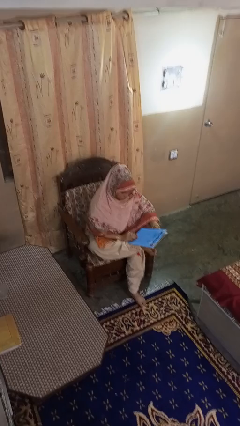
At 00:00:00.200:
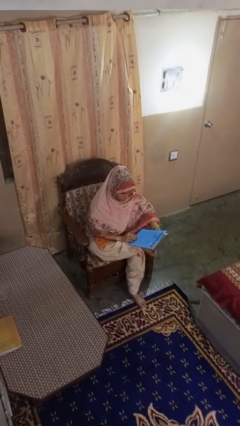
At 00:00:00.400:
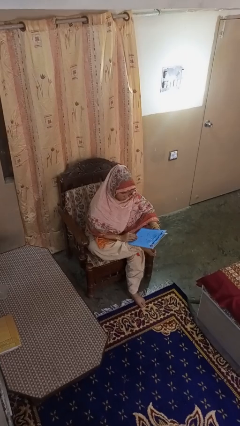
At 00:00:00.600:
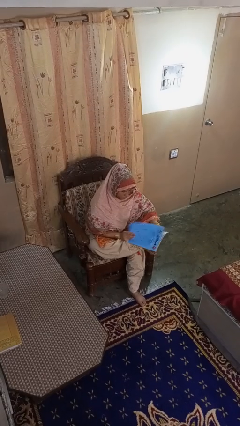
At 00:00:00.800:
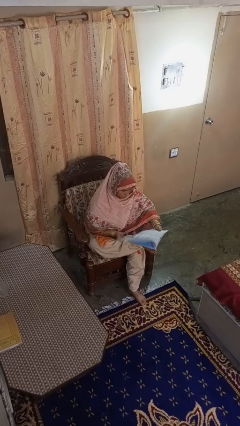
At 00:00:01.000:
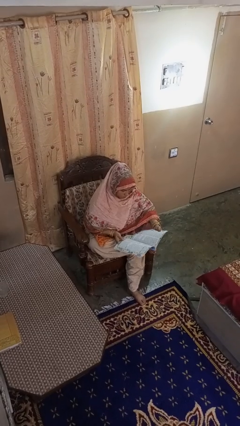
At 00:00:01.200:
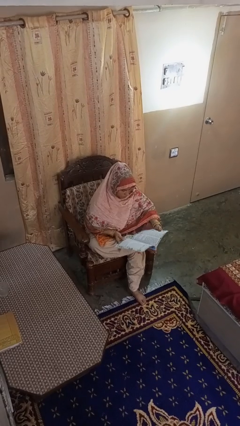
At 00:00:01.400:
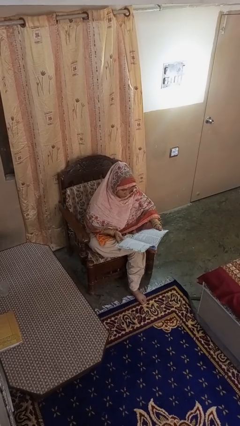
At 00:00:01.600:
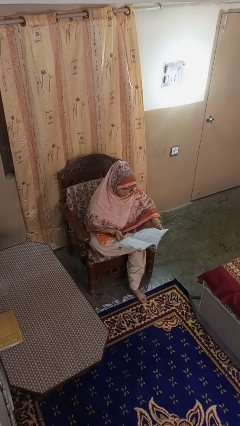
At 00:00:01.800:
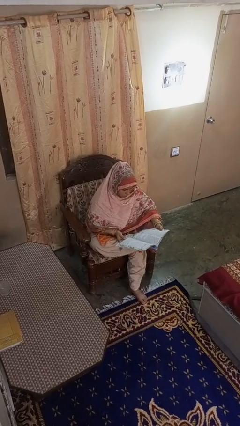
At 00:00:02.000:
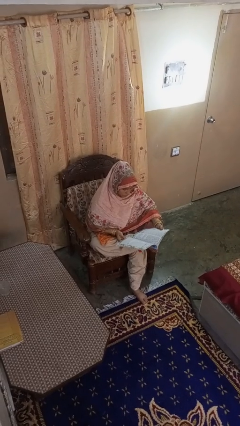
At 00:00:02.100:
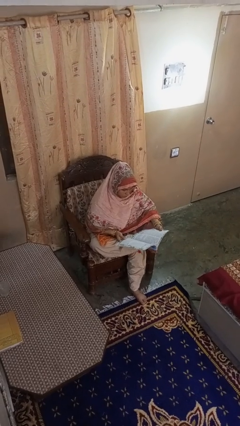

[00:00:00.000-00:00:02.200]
person reads magazine

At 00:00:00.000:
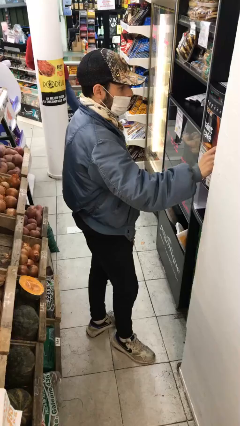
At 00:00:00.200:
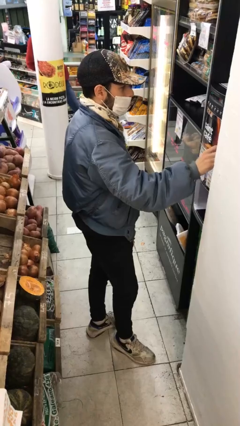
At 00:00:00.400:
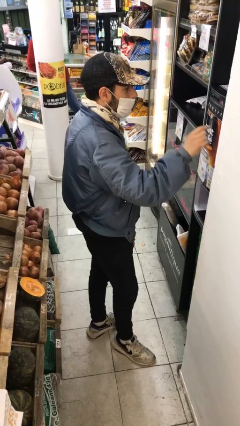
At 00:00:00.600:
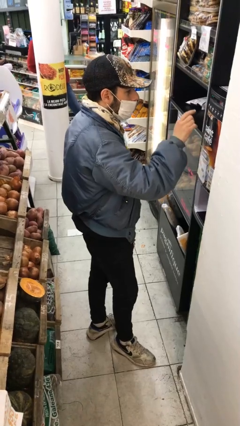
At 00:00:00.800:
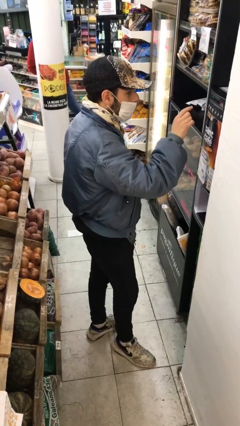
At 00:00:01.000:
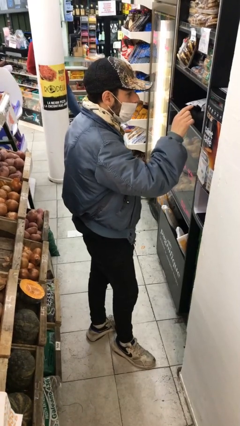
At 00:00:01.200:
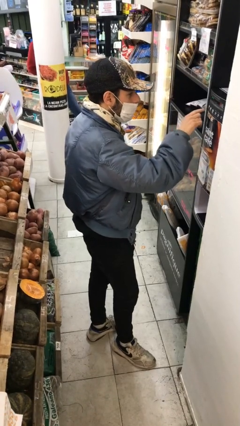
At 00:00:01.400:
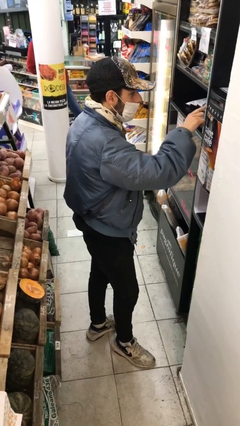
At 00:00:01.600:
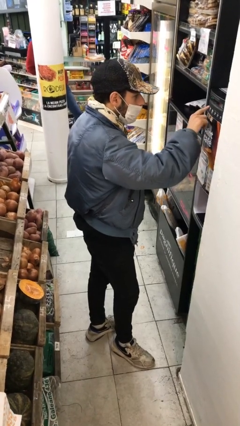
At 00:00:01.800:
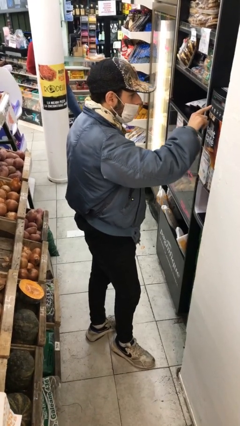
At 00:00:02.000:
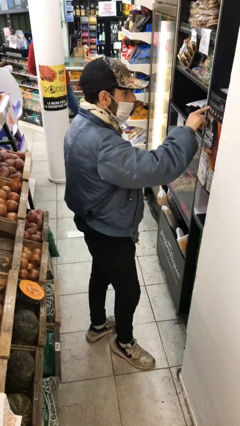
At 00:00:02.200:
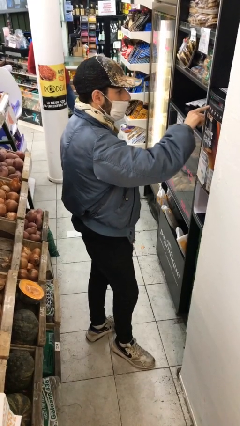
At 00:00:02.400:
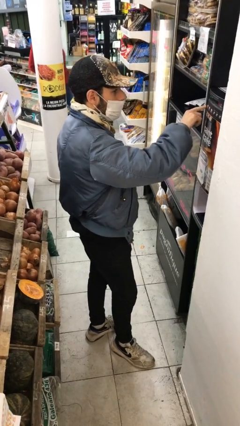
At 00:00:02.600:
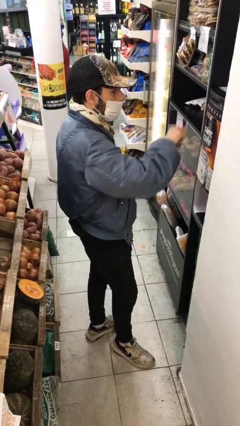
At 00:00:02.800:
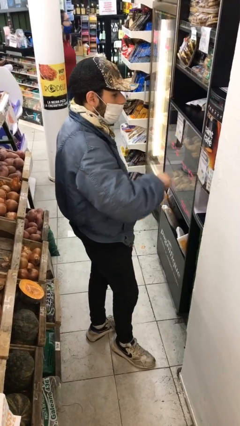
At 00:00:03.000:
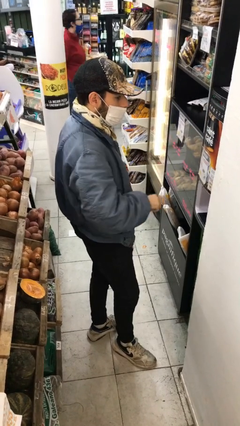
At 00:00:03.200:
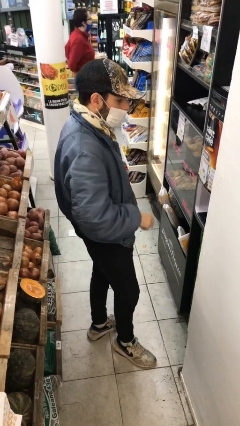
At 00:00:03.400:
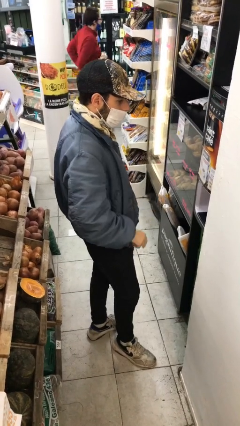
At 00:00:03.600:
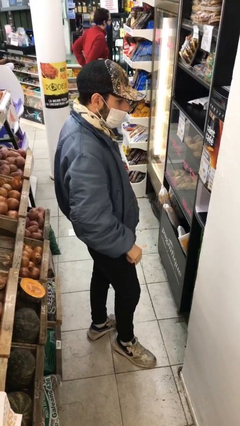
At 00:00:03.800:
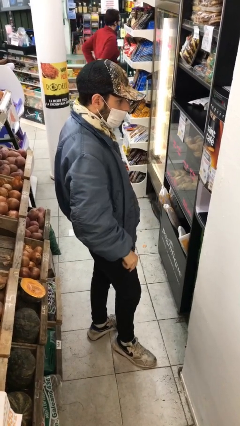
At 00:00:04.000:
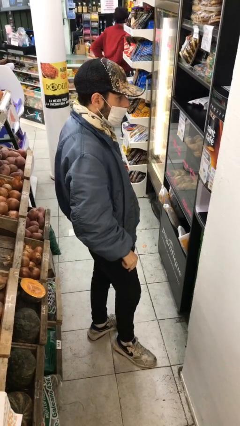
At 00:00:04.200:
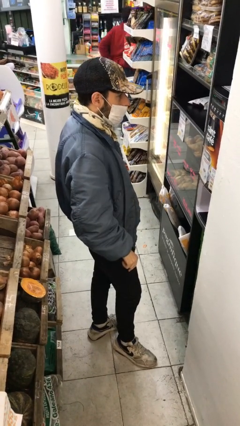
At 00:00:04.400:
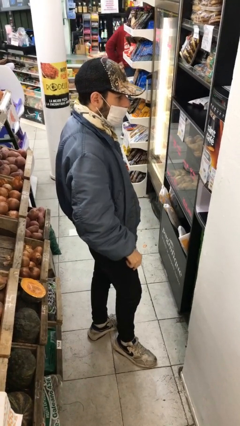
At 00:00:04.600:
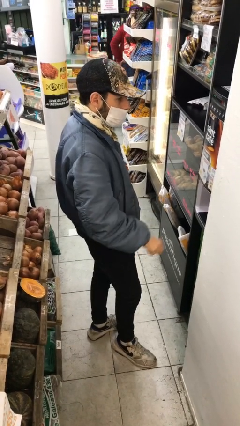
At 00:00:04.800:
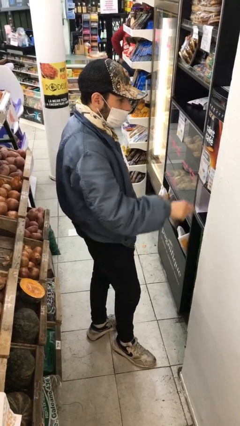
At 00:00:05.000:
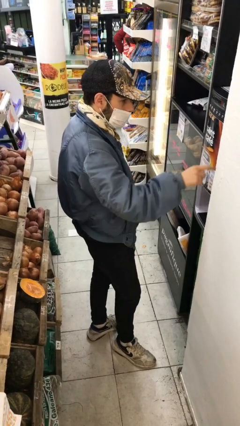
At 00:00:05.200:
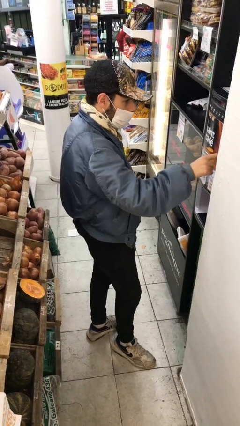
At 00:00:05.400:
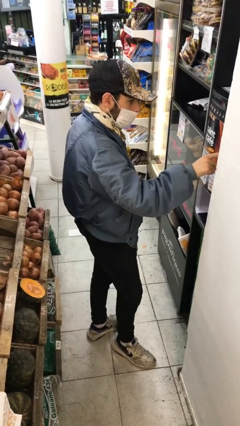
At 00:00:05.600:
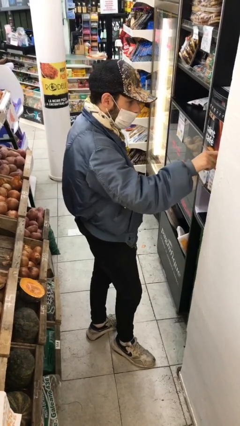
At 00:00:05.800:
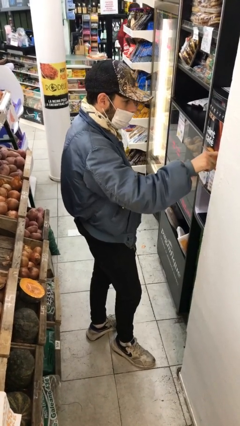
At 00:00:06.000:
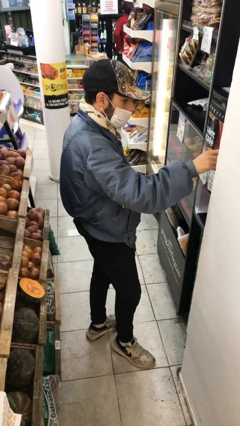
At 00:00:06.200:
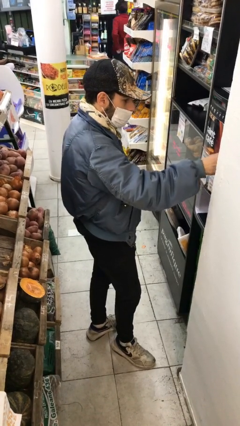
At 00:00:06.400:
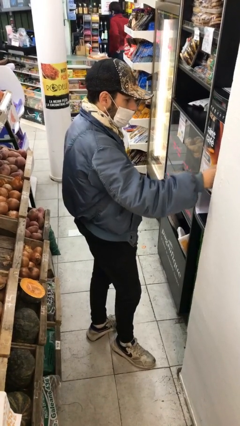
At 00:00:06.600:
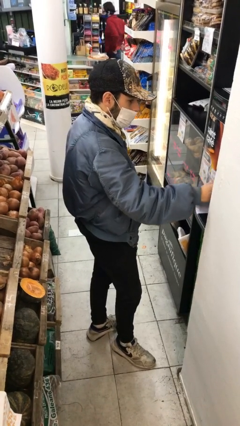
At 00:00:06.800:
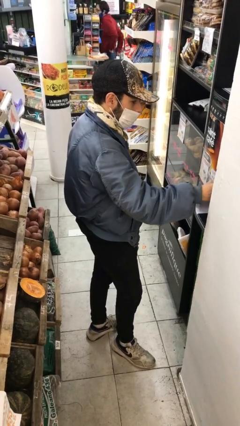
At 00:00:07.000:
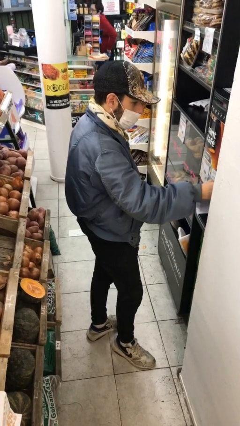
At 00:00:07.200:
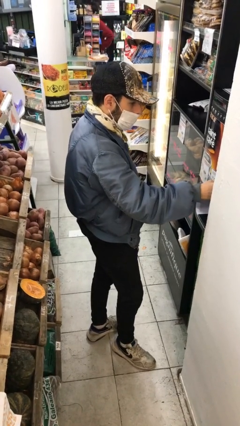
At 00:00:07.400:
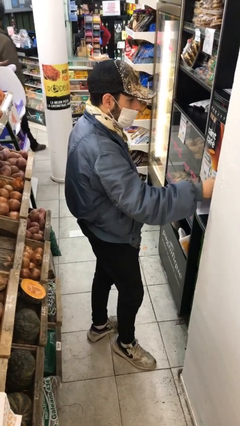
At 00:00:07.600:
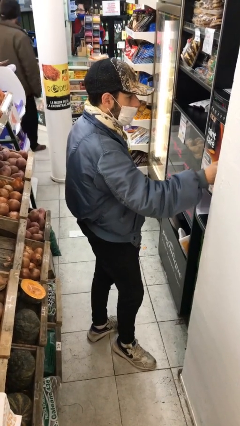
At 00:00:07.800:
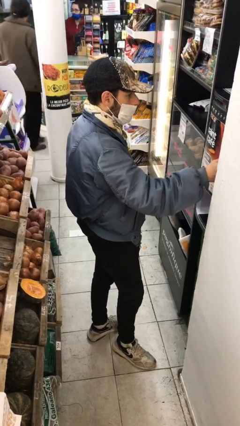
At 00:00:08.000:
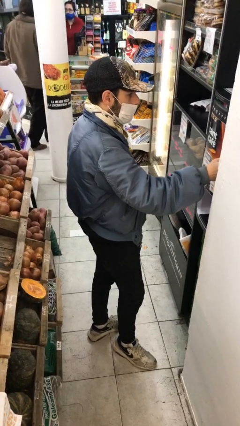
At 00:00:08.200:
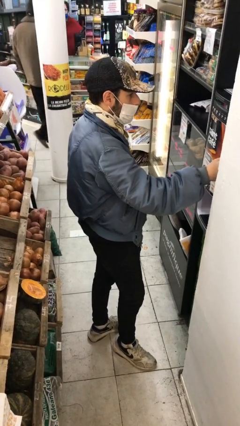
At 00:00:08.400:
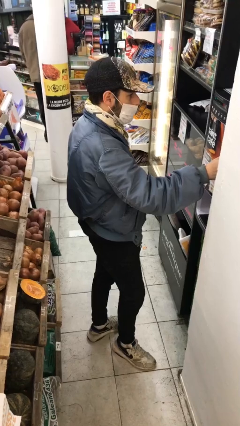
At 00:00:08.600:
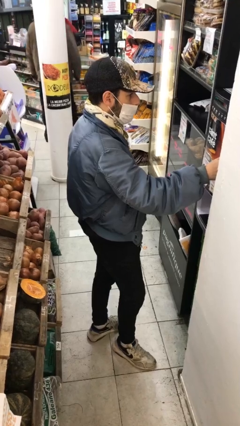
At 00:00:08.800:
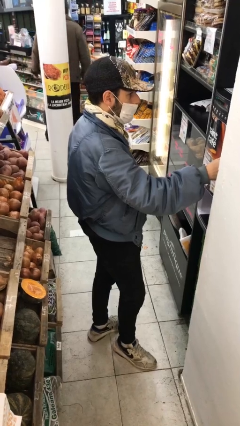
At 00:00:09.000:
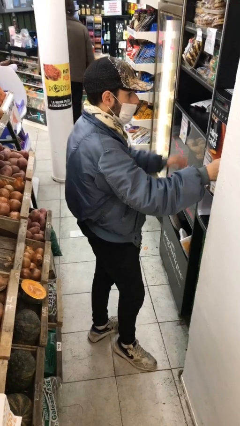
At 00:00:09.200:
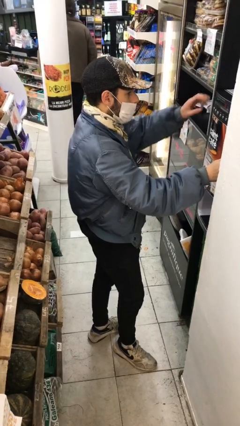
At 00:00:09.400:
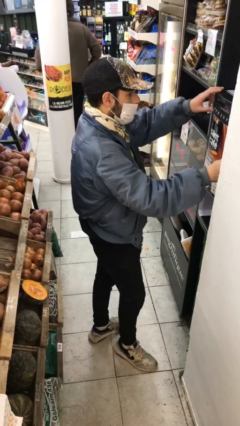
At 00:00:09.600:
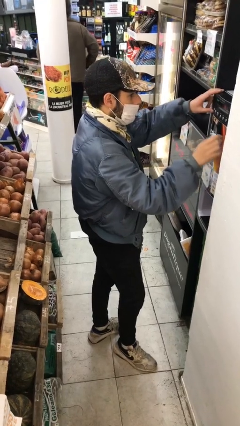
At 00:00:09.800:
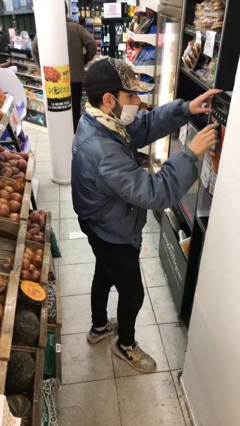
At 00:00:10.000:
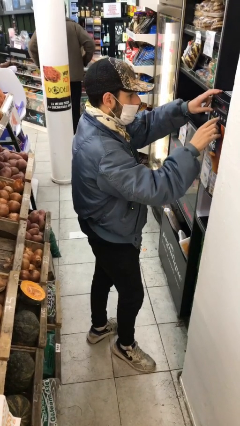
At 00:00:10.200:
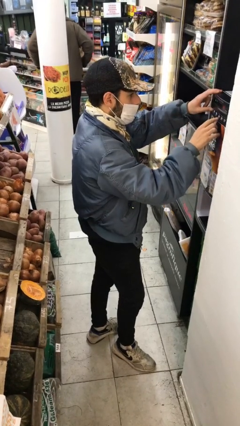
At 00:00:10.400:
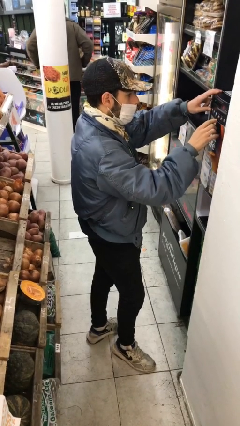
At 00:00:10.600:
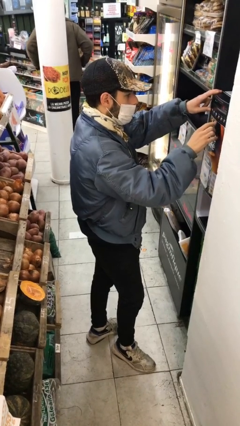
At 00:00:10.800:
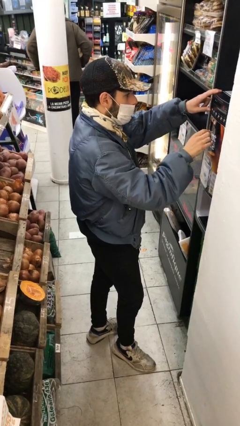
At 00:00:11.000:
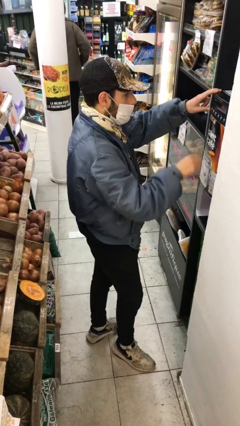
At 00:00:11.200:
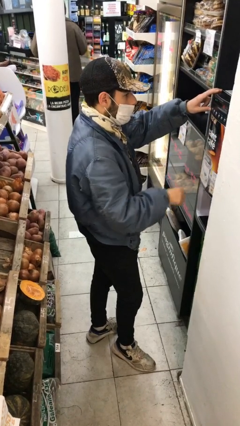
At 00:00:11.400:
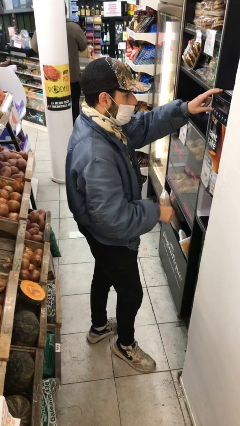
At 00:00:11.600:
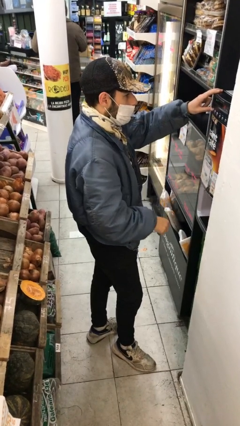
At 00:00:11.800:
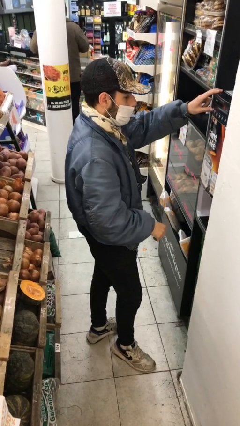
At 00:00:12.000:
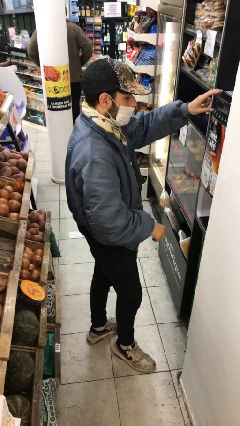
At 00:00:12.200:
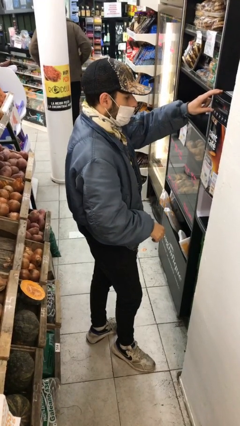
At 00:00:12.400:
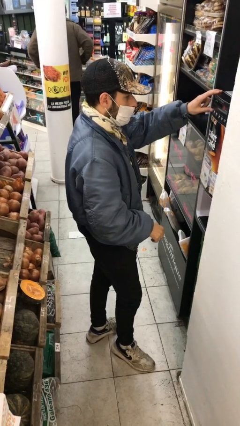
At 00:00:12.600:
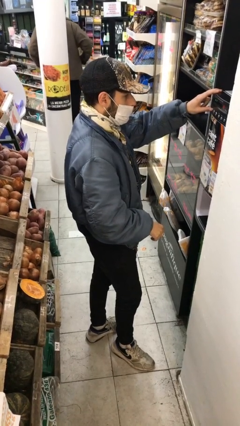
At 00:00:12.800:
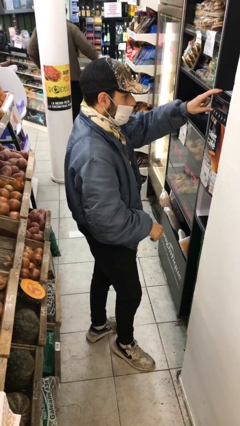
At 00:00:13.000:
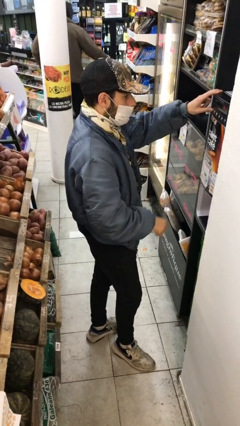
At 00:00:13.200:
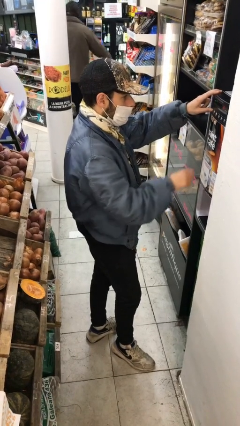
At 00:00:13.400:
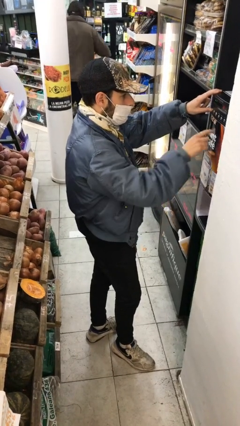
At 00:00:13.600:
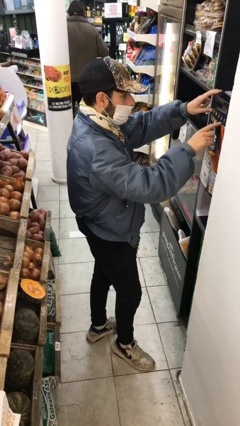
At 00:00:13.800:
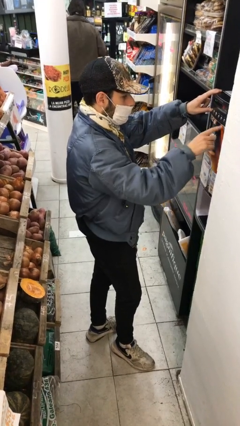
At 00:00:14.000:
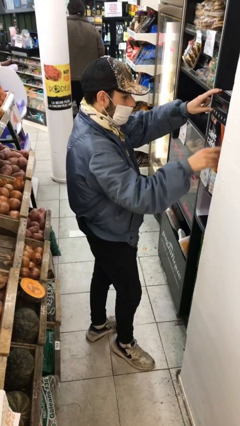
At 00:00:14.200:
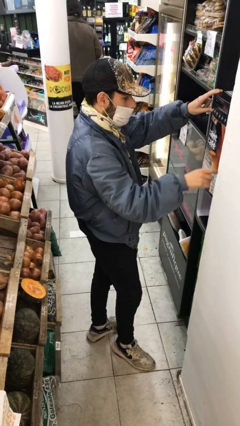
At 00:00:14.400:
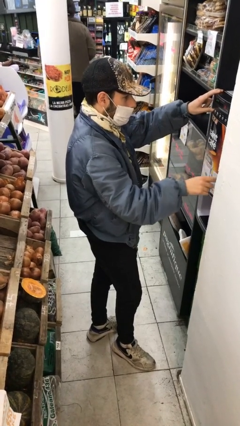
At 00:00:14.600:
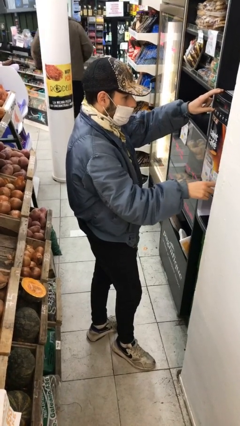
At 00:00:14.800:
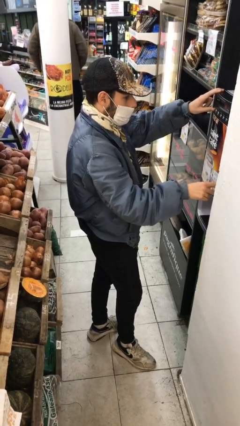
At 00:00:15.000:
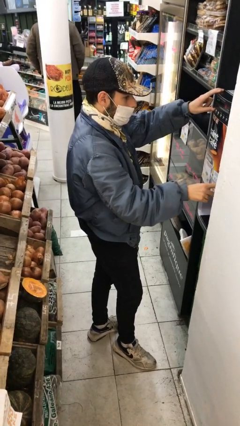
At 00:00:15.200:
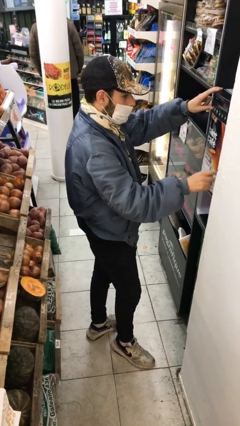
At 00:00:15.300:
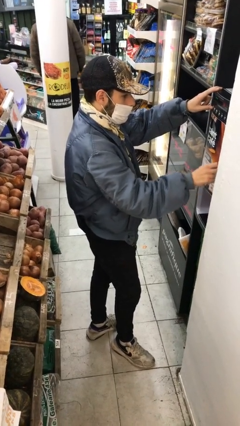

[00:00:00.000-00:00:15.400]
person purchases from machine

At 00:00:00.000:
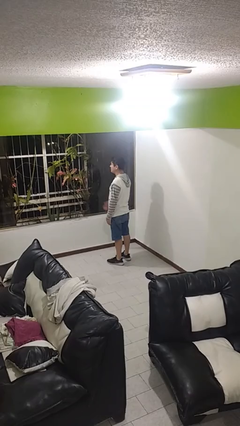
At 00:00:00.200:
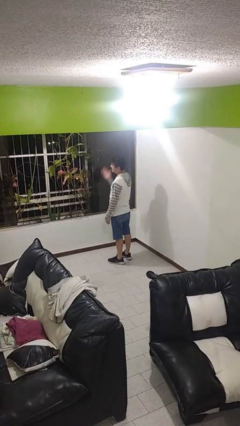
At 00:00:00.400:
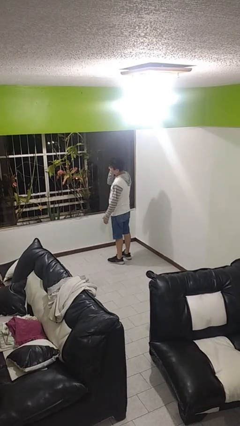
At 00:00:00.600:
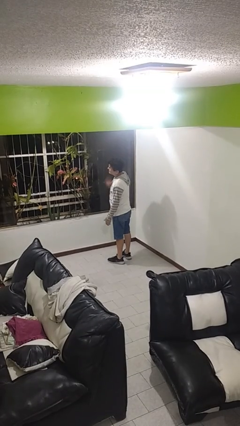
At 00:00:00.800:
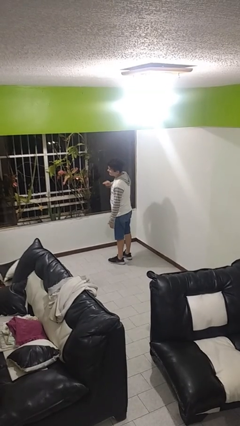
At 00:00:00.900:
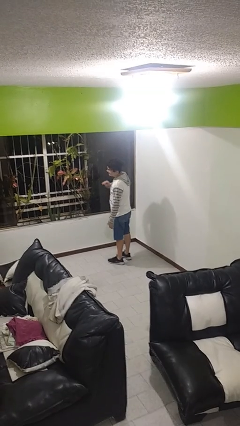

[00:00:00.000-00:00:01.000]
person swats bug
